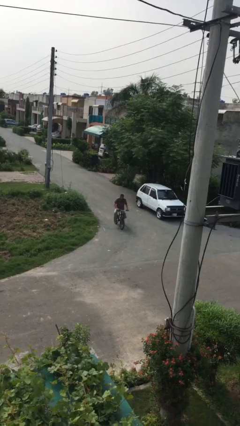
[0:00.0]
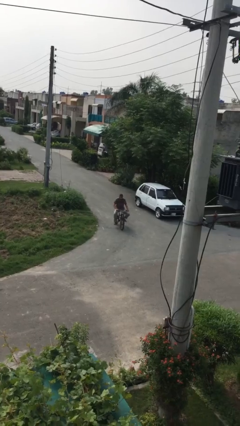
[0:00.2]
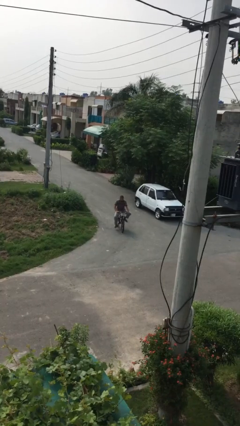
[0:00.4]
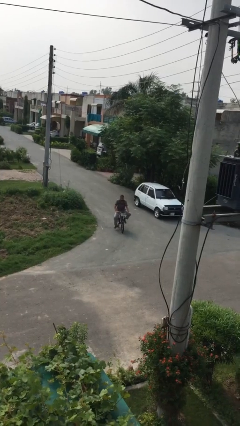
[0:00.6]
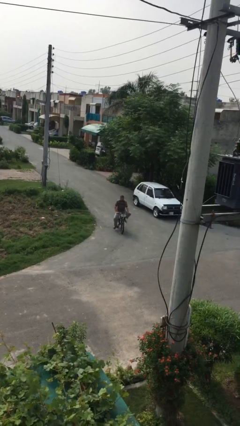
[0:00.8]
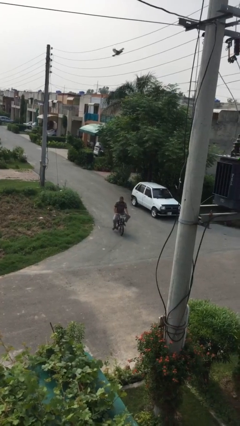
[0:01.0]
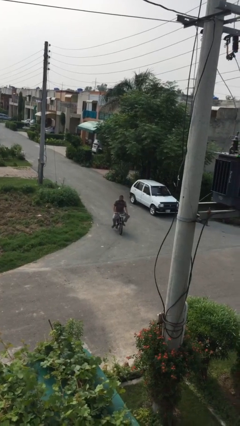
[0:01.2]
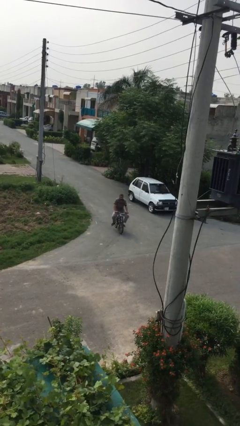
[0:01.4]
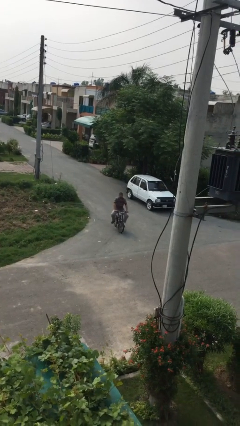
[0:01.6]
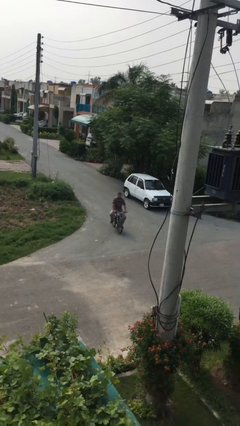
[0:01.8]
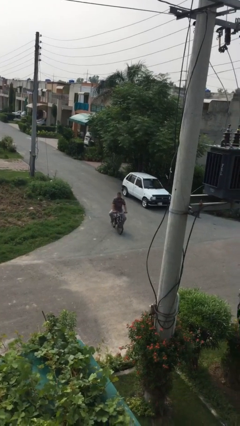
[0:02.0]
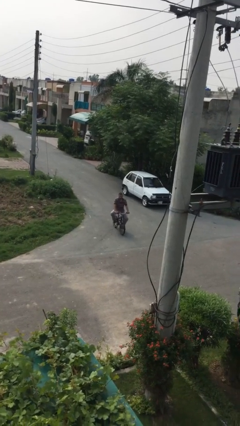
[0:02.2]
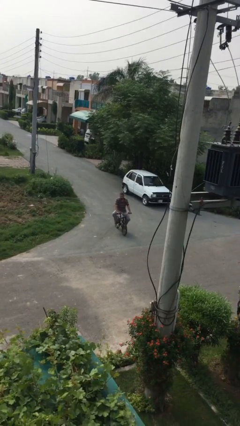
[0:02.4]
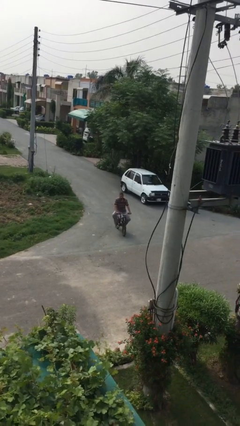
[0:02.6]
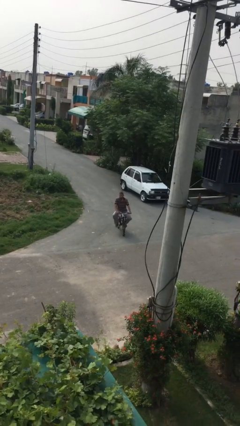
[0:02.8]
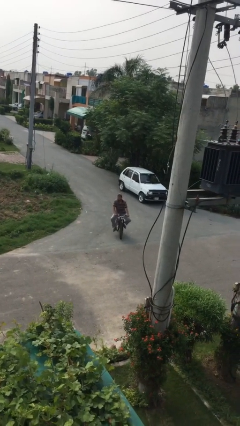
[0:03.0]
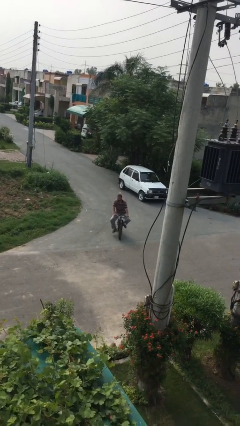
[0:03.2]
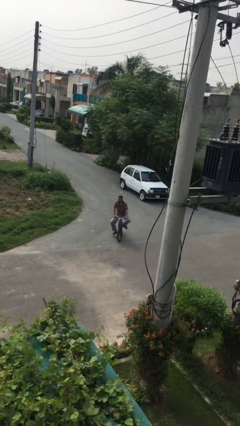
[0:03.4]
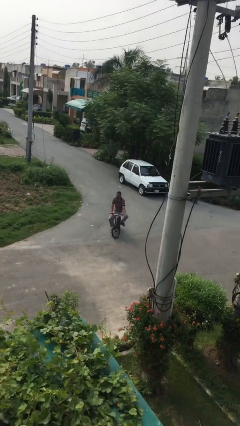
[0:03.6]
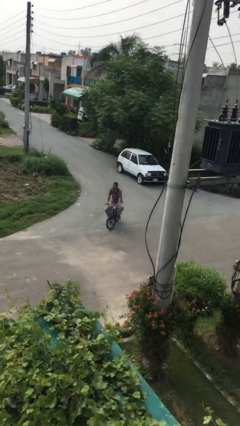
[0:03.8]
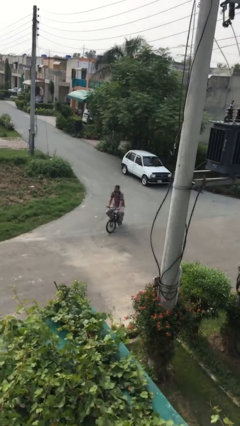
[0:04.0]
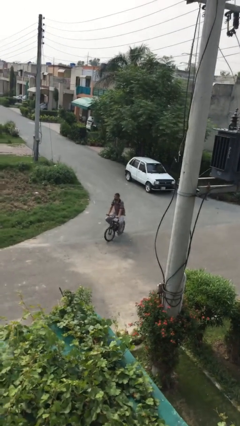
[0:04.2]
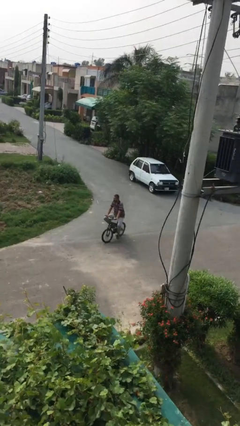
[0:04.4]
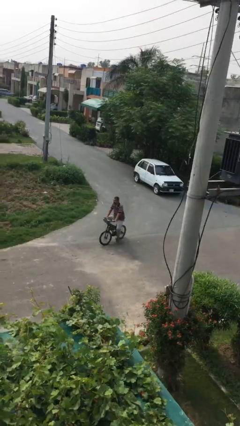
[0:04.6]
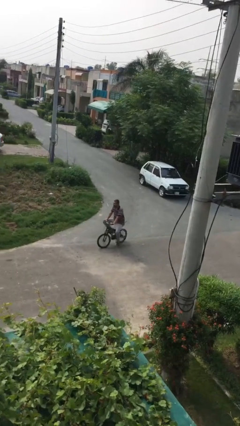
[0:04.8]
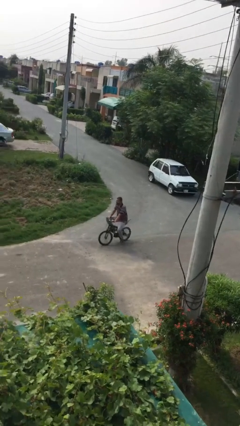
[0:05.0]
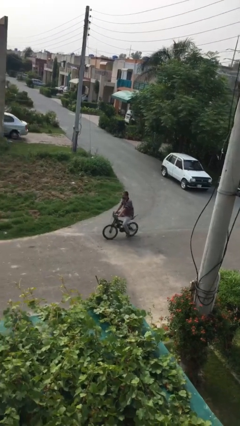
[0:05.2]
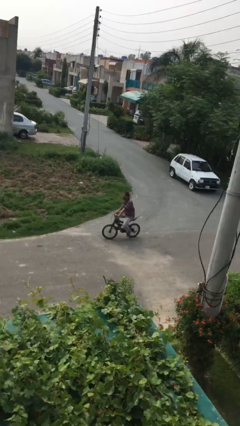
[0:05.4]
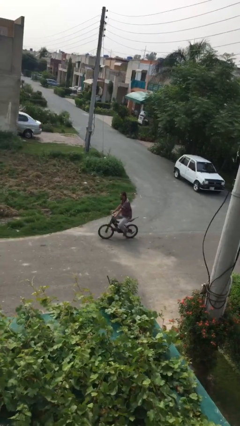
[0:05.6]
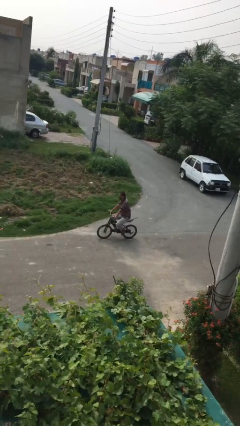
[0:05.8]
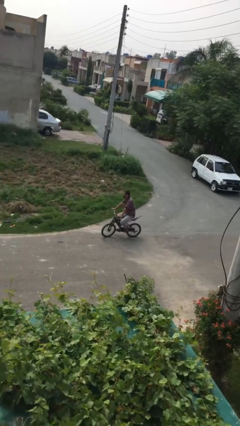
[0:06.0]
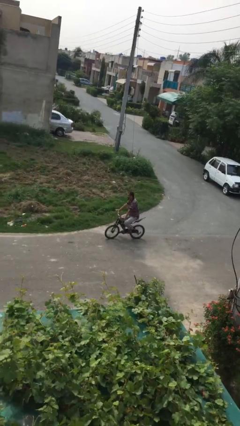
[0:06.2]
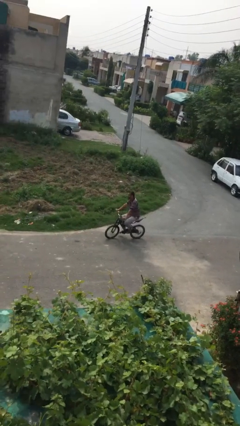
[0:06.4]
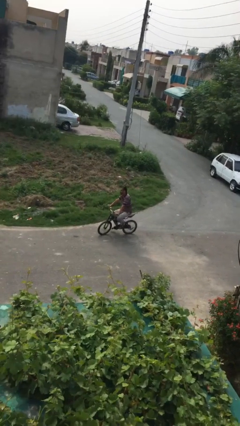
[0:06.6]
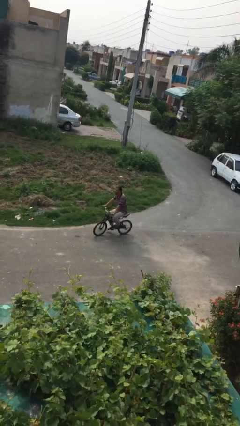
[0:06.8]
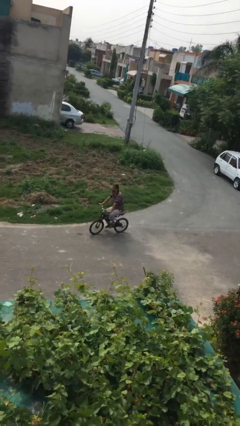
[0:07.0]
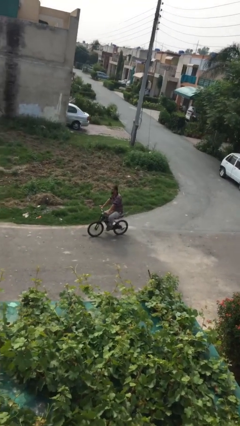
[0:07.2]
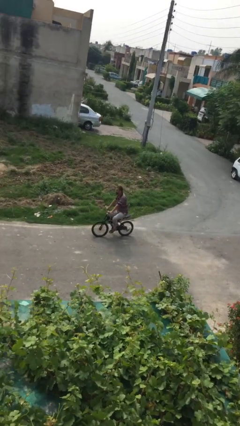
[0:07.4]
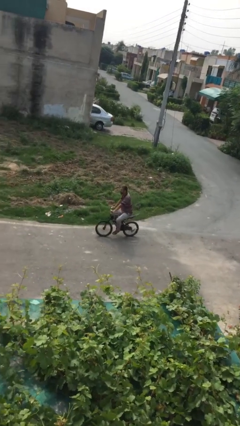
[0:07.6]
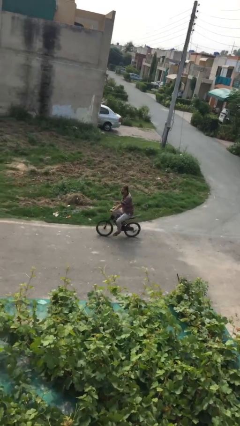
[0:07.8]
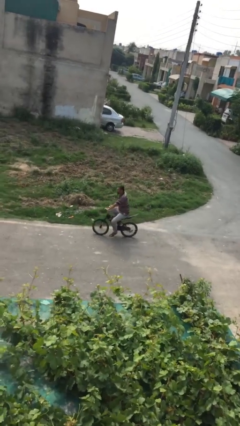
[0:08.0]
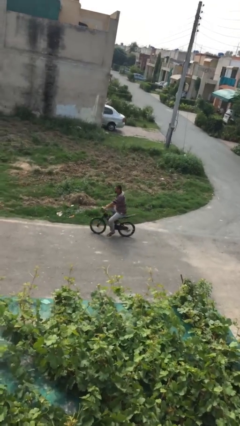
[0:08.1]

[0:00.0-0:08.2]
person rides bicycle

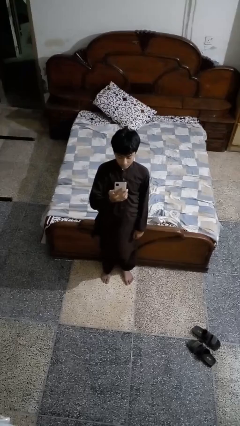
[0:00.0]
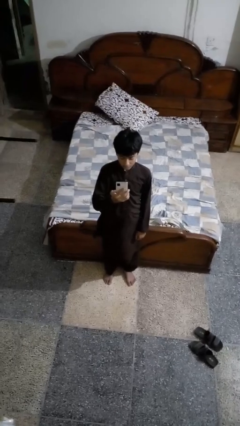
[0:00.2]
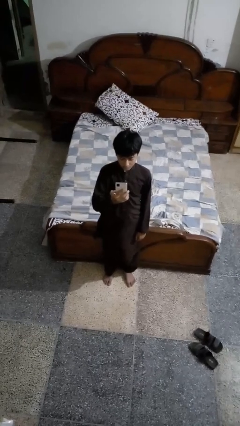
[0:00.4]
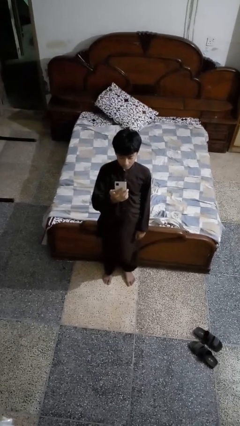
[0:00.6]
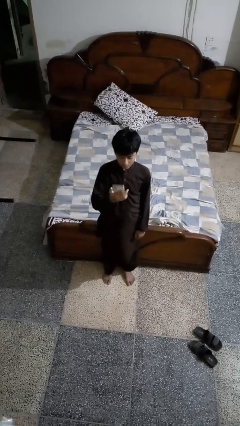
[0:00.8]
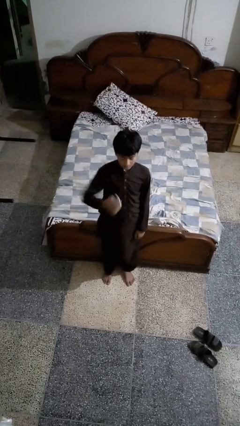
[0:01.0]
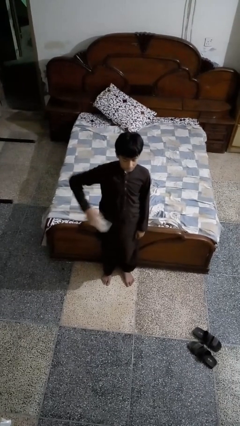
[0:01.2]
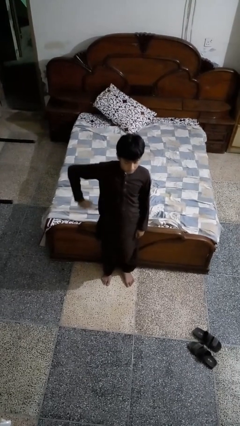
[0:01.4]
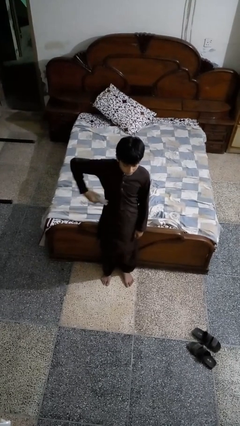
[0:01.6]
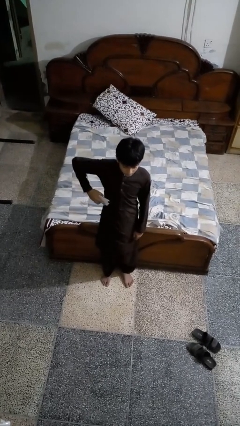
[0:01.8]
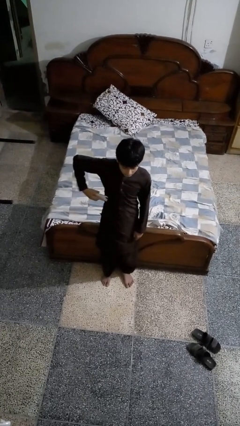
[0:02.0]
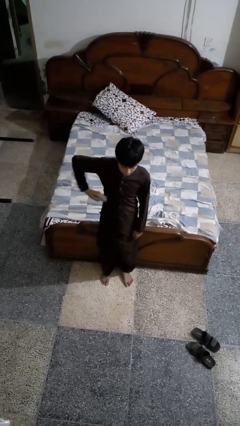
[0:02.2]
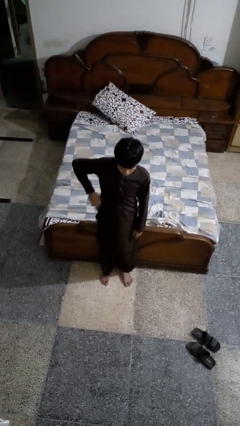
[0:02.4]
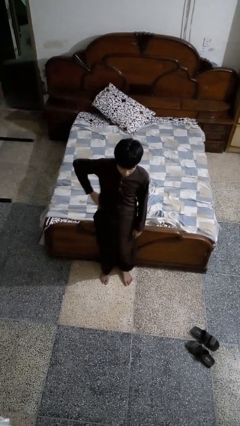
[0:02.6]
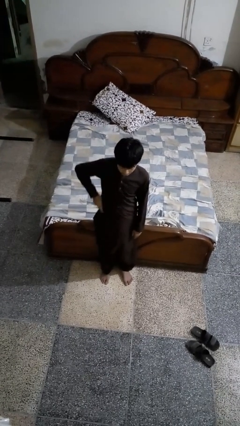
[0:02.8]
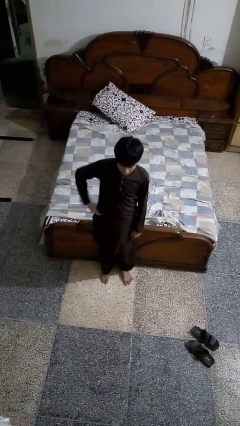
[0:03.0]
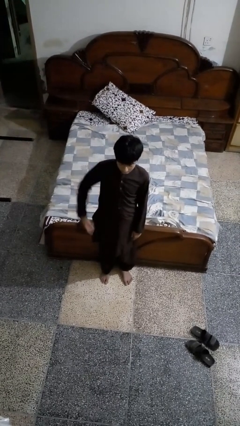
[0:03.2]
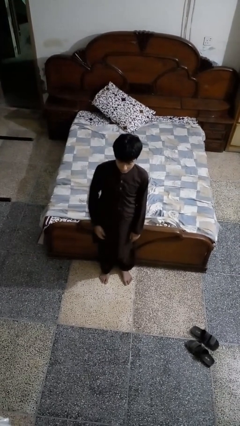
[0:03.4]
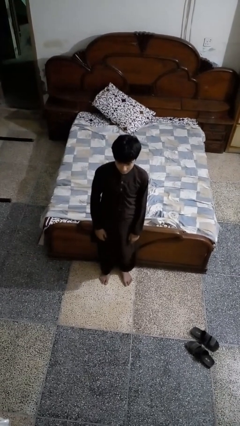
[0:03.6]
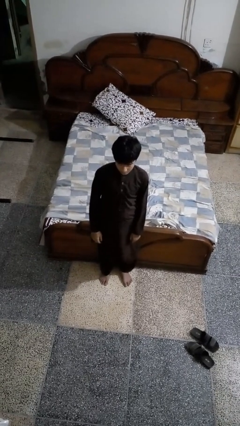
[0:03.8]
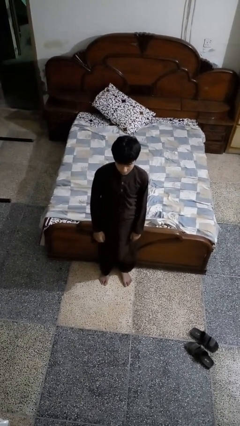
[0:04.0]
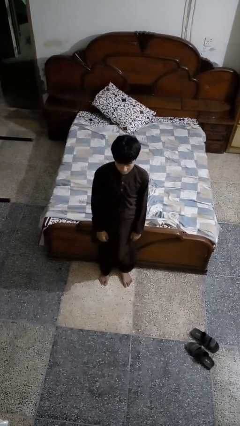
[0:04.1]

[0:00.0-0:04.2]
person puts phone into pocket

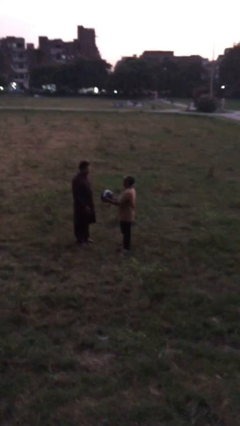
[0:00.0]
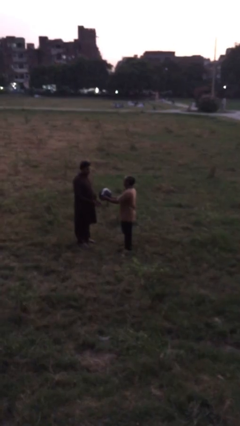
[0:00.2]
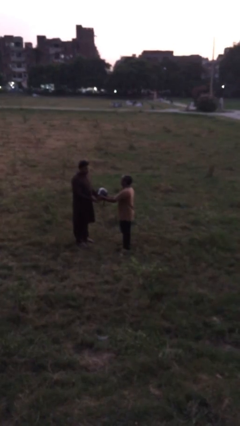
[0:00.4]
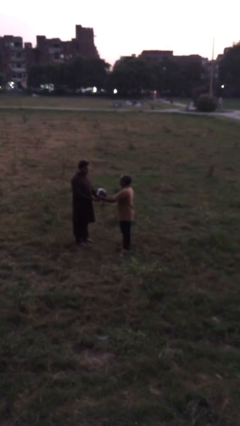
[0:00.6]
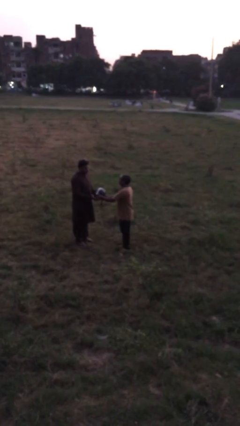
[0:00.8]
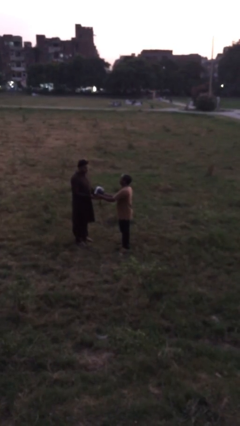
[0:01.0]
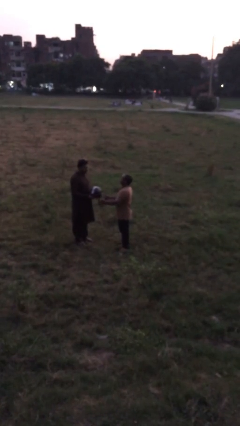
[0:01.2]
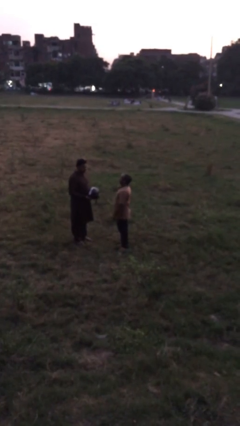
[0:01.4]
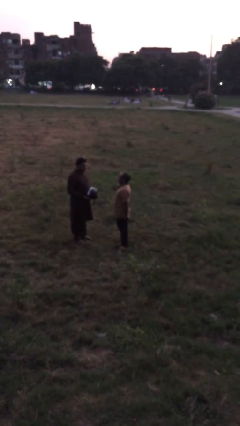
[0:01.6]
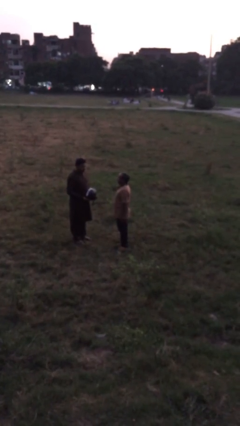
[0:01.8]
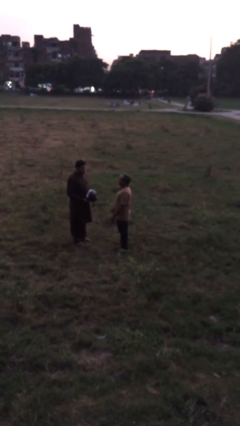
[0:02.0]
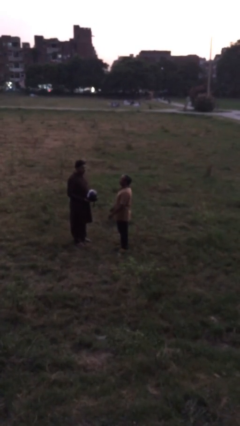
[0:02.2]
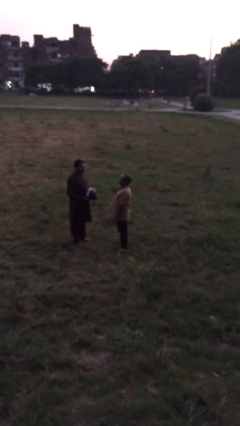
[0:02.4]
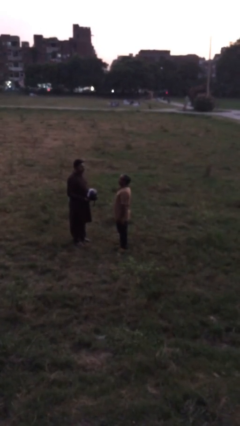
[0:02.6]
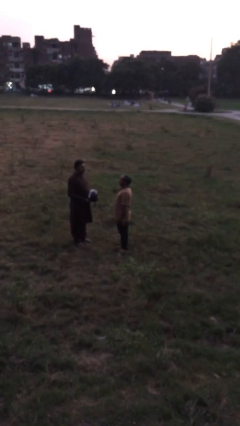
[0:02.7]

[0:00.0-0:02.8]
person transfers object to person

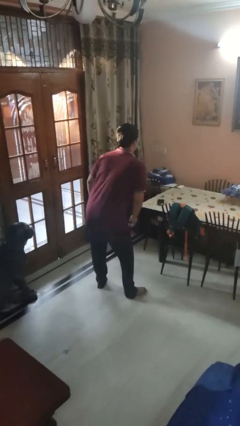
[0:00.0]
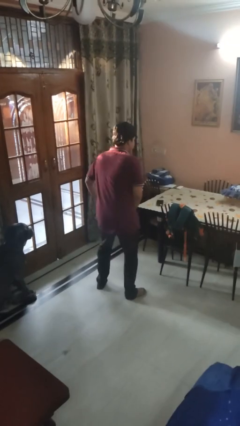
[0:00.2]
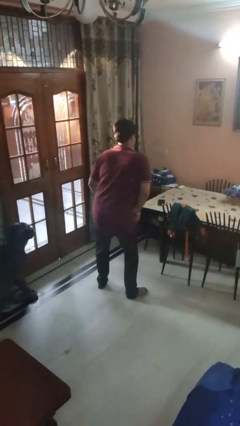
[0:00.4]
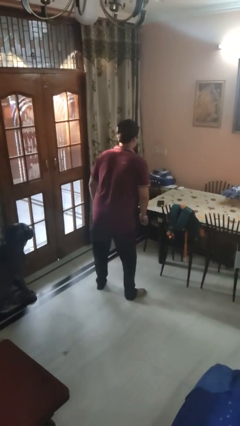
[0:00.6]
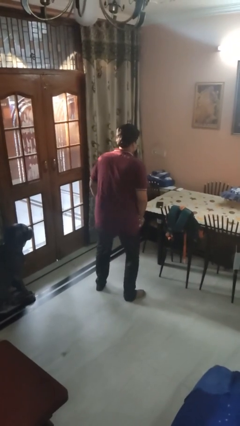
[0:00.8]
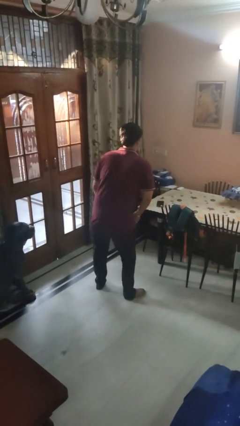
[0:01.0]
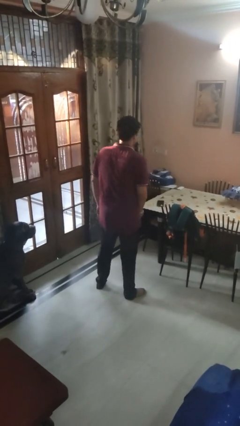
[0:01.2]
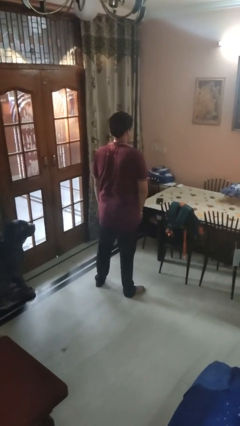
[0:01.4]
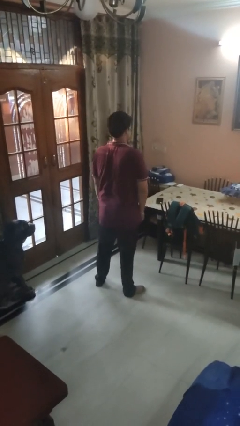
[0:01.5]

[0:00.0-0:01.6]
person wiggles hips

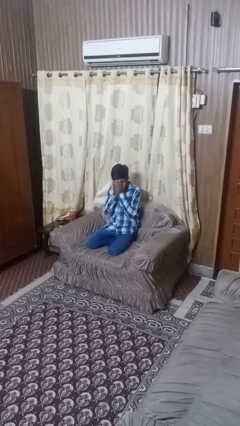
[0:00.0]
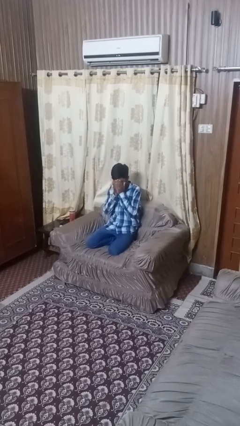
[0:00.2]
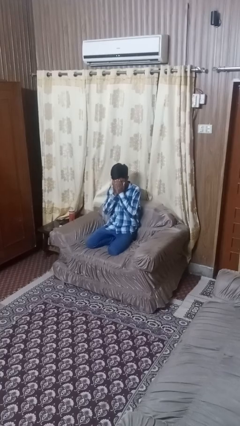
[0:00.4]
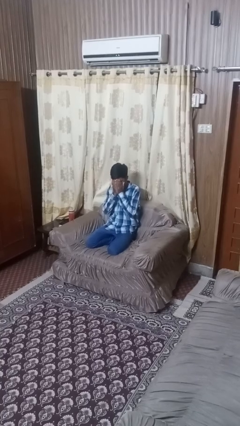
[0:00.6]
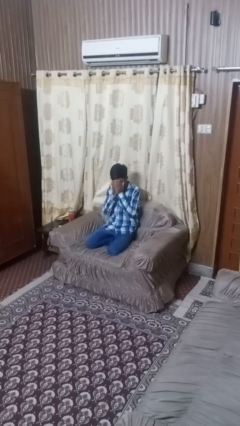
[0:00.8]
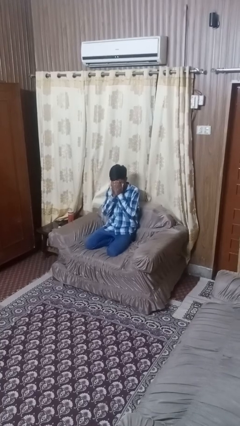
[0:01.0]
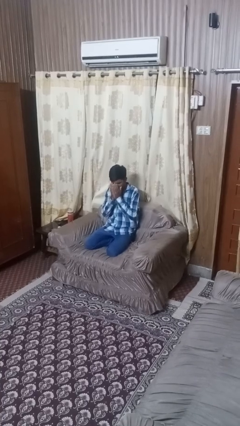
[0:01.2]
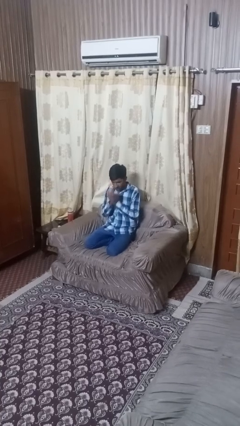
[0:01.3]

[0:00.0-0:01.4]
person covers face with hands
